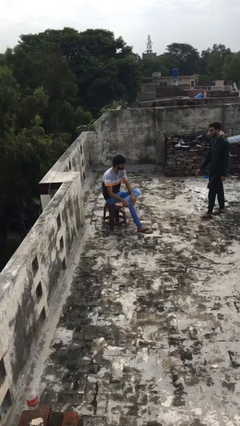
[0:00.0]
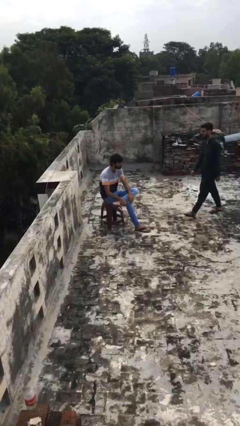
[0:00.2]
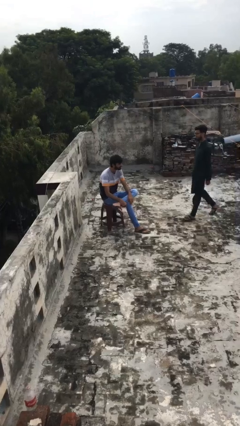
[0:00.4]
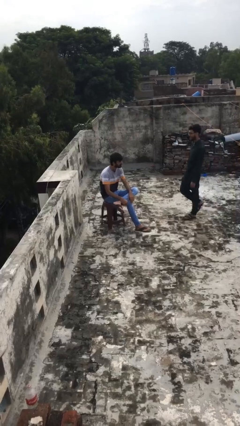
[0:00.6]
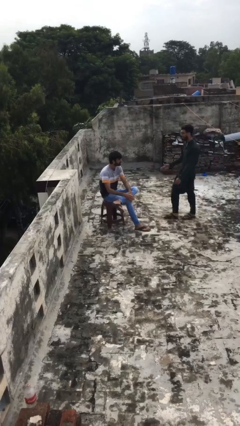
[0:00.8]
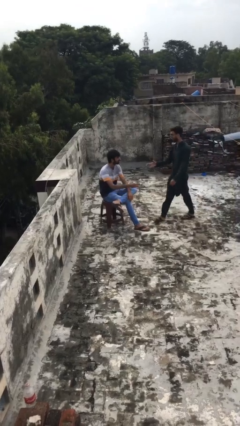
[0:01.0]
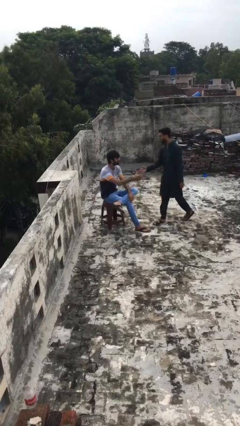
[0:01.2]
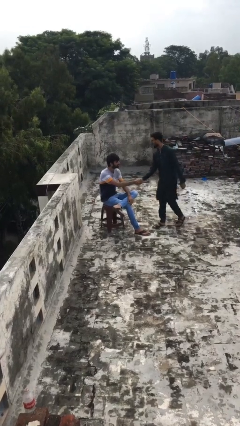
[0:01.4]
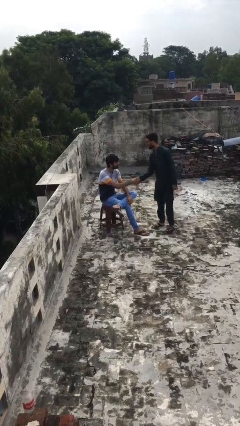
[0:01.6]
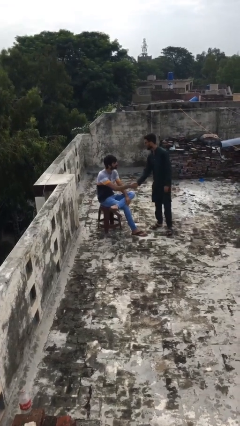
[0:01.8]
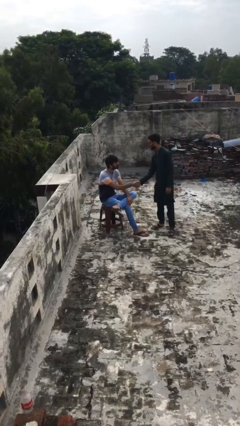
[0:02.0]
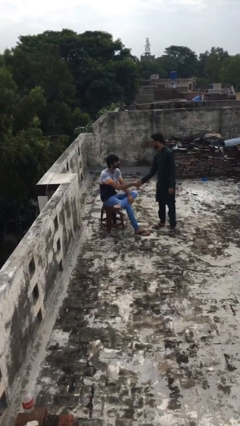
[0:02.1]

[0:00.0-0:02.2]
person shakes hand

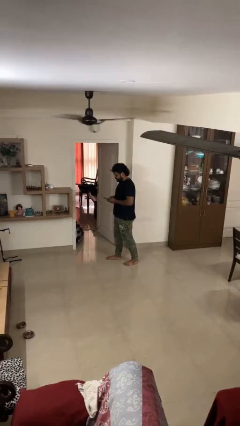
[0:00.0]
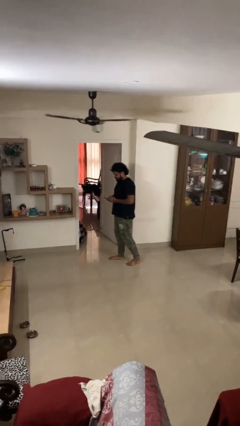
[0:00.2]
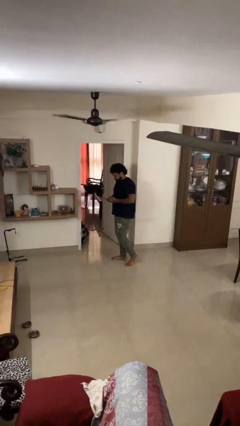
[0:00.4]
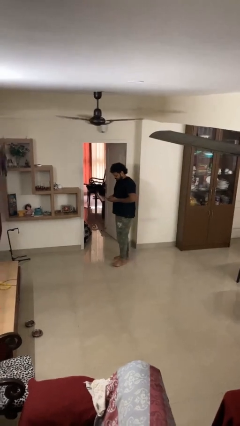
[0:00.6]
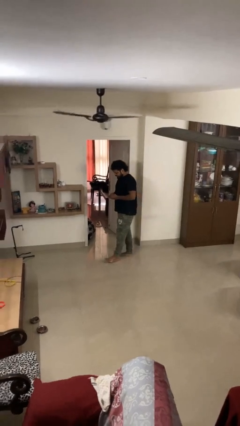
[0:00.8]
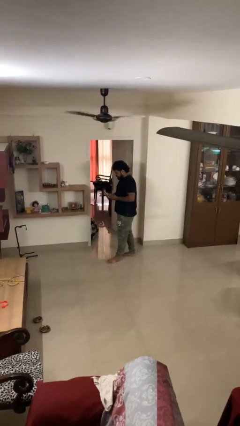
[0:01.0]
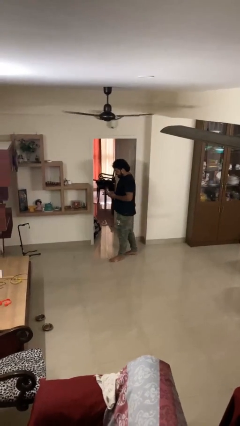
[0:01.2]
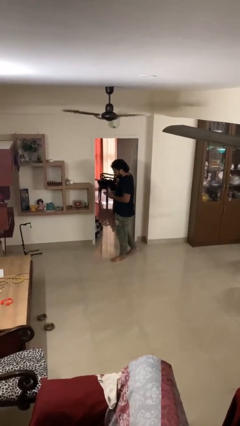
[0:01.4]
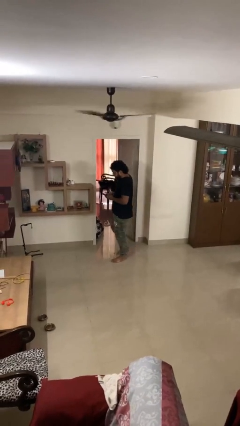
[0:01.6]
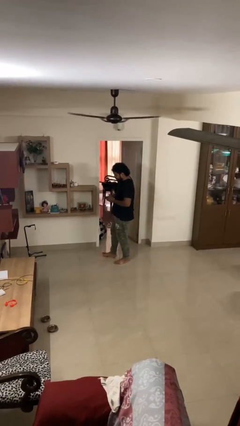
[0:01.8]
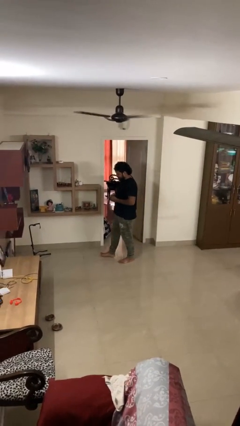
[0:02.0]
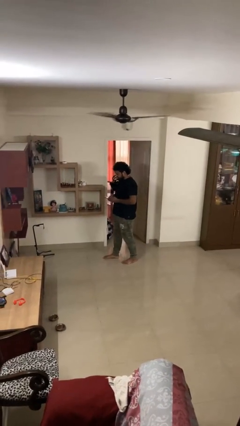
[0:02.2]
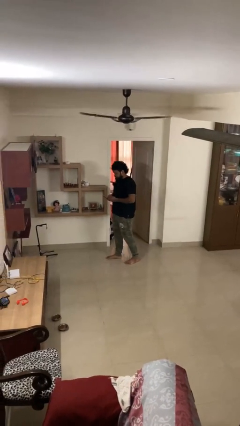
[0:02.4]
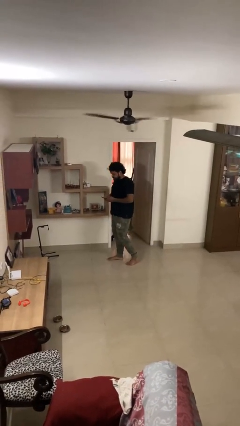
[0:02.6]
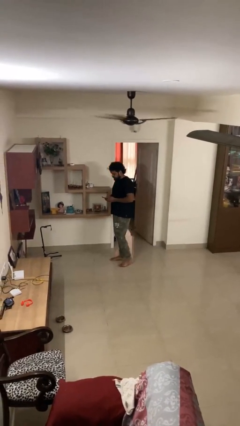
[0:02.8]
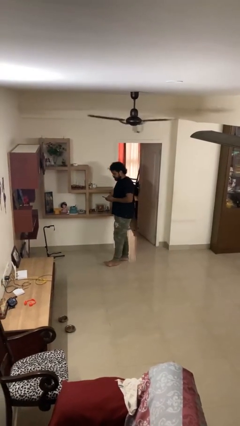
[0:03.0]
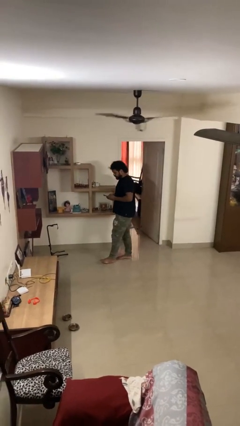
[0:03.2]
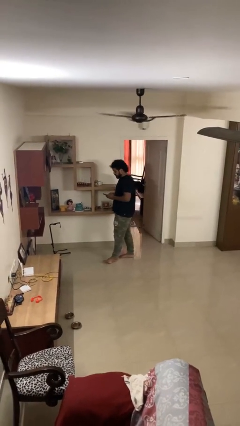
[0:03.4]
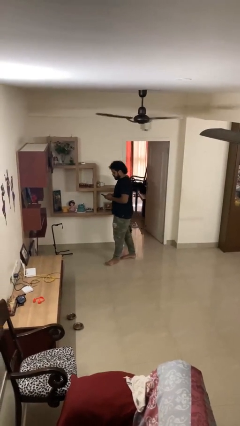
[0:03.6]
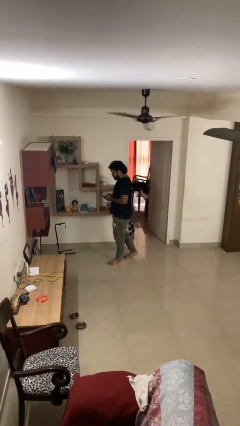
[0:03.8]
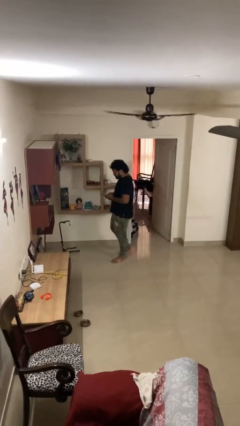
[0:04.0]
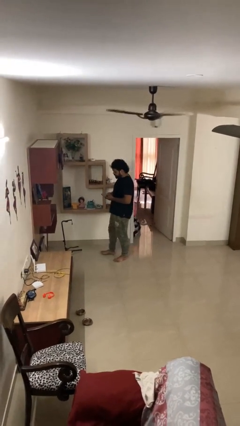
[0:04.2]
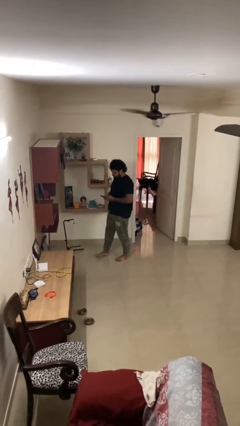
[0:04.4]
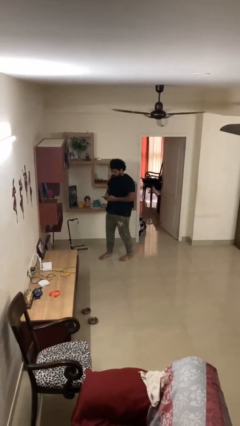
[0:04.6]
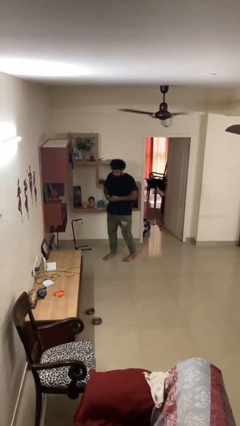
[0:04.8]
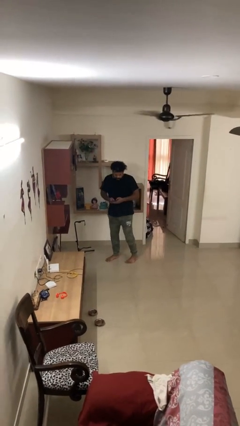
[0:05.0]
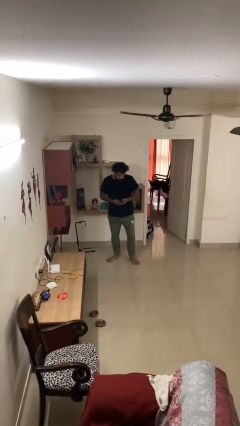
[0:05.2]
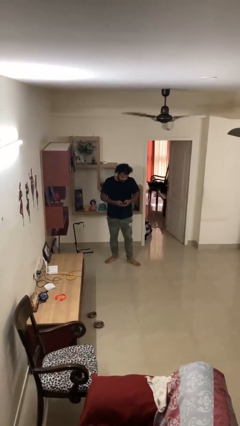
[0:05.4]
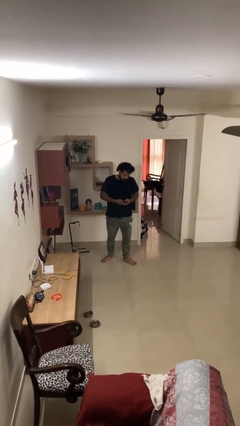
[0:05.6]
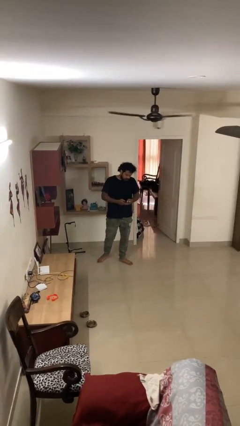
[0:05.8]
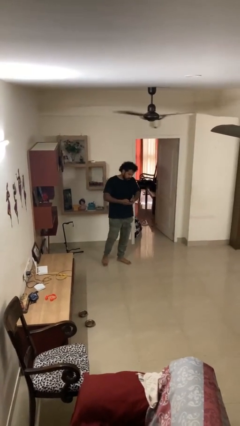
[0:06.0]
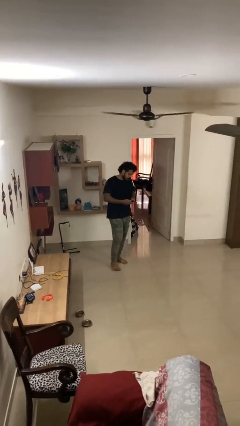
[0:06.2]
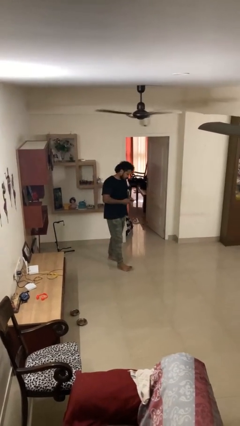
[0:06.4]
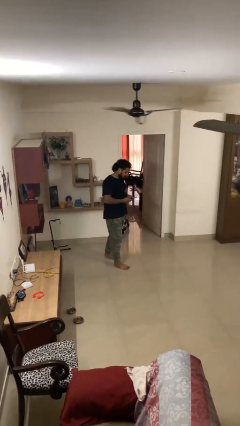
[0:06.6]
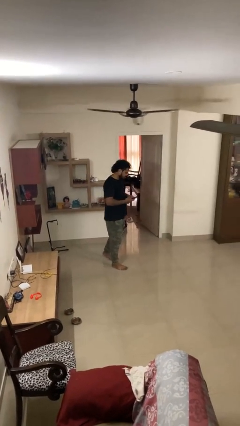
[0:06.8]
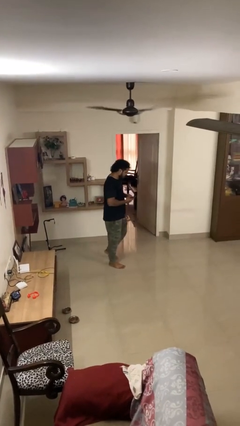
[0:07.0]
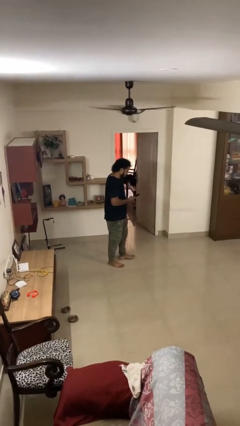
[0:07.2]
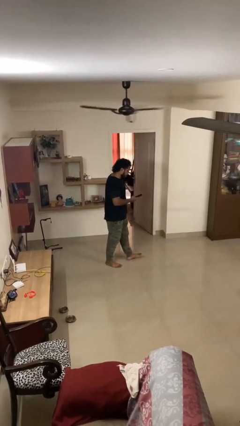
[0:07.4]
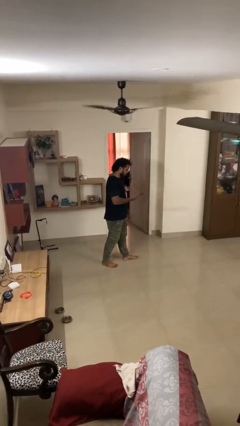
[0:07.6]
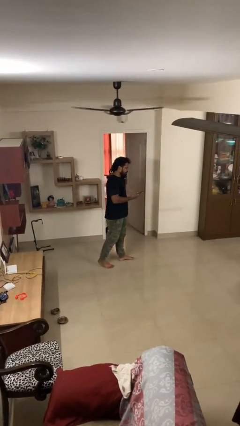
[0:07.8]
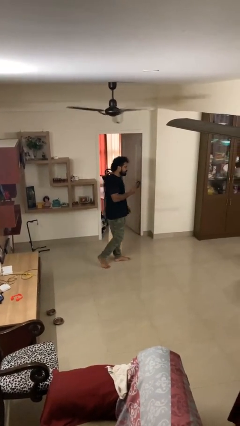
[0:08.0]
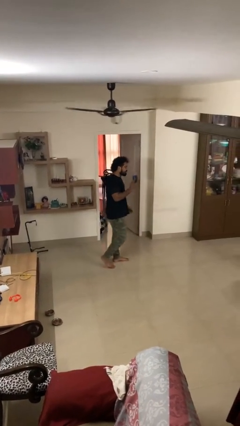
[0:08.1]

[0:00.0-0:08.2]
person texts on phone

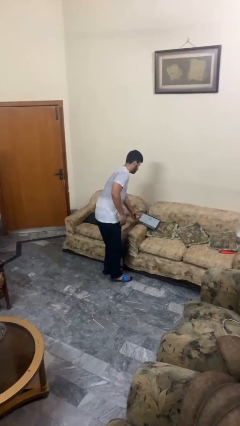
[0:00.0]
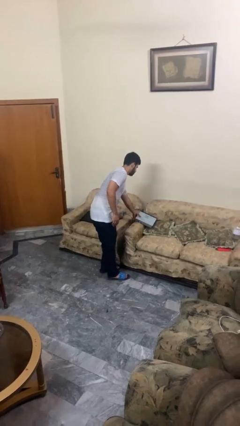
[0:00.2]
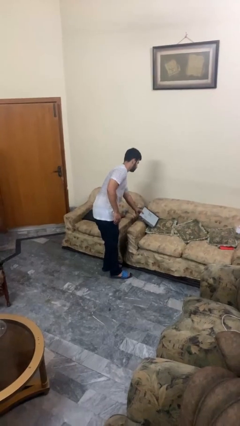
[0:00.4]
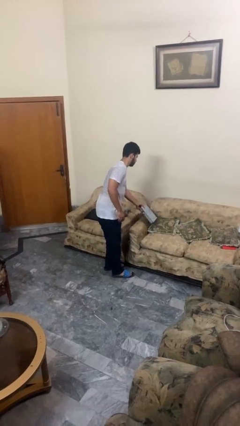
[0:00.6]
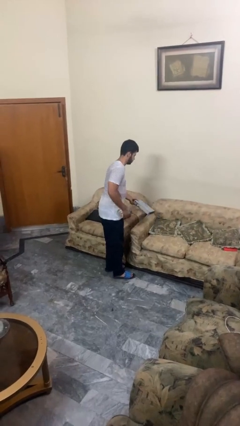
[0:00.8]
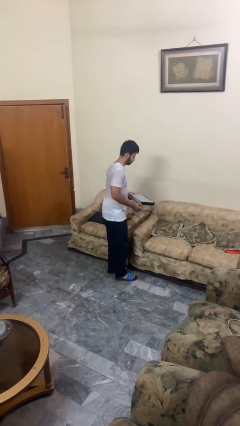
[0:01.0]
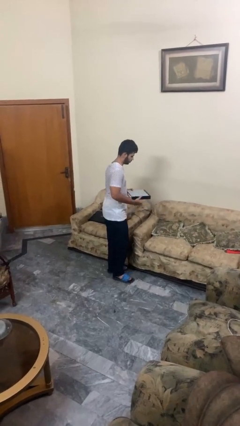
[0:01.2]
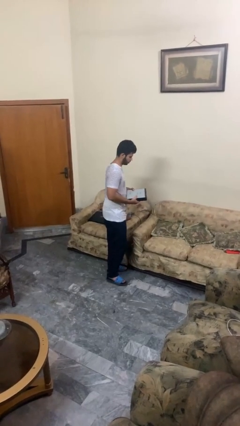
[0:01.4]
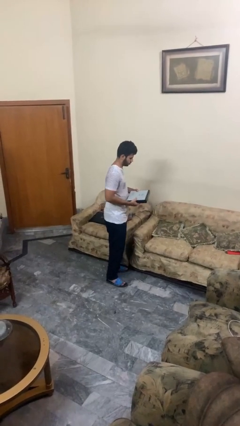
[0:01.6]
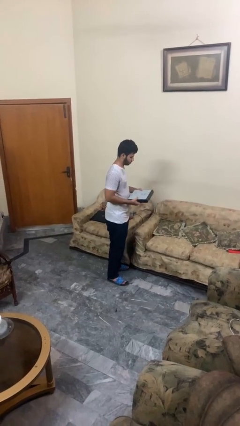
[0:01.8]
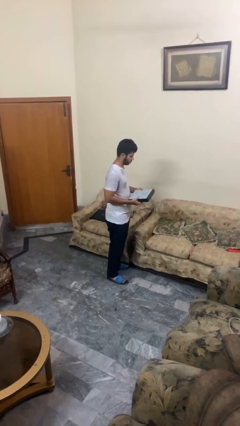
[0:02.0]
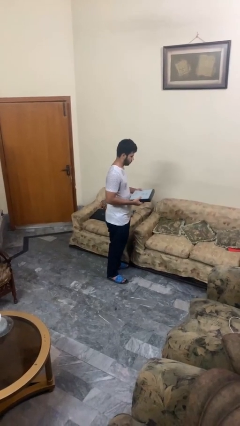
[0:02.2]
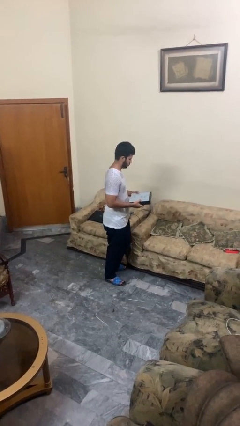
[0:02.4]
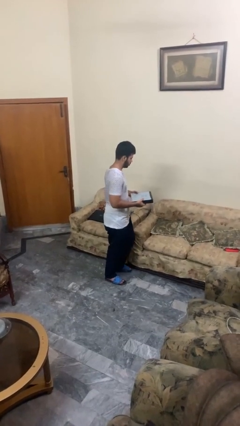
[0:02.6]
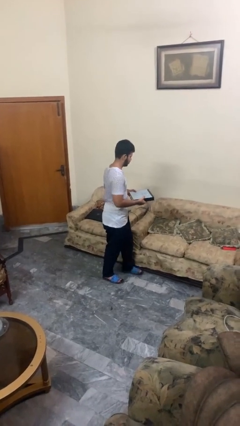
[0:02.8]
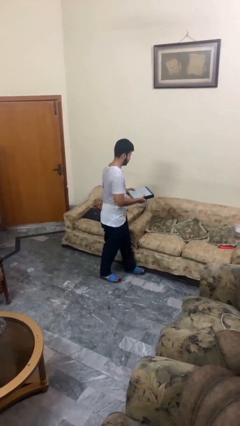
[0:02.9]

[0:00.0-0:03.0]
person picks up object from couch

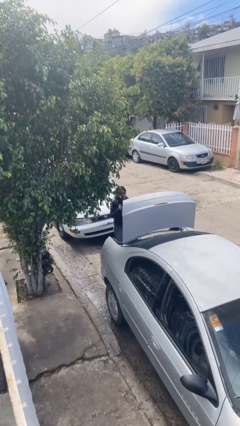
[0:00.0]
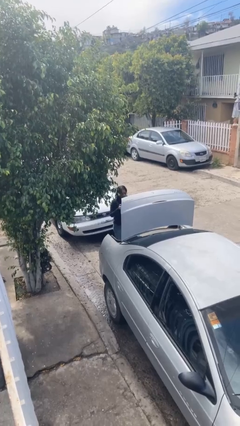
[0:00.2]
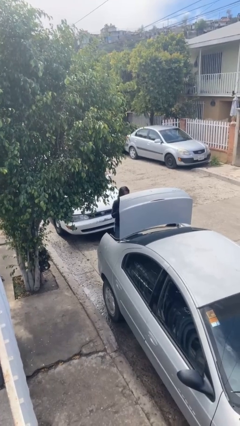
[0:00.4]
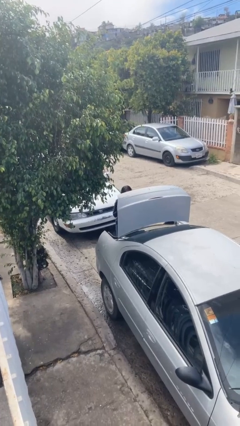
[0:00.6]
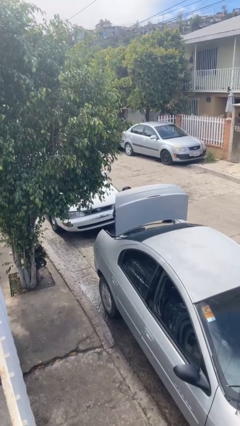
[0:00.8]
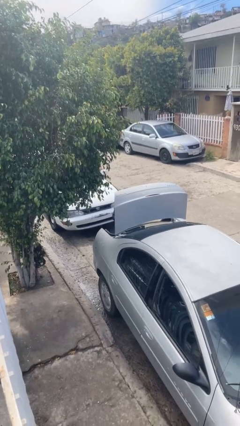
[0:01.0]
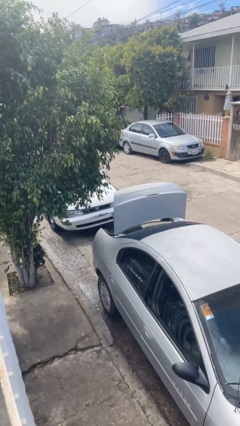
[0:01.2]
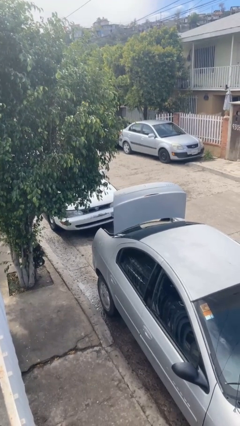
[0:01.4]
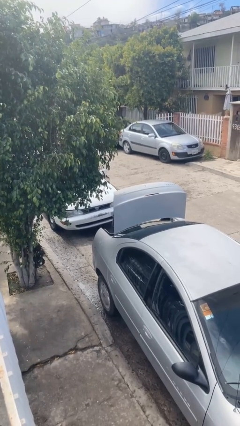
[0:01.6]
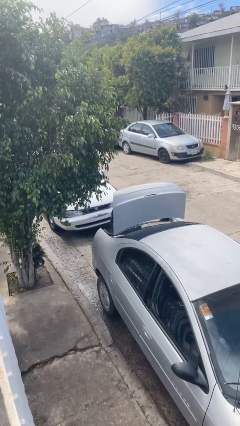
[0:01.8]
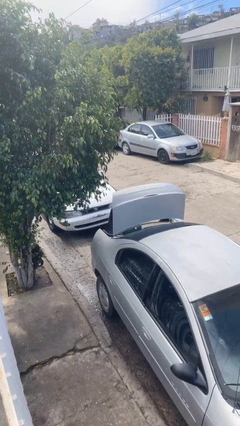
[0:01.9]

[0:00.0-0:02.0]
person loads car

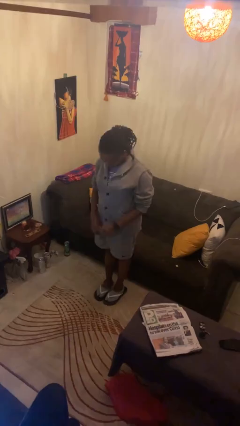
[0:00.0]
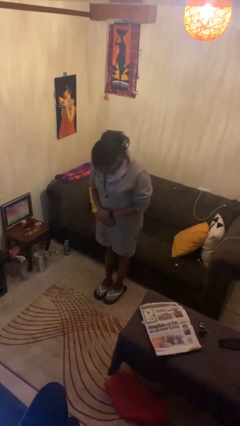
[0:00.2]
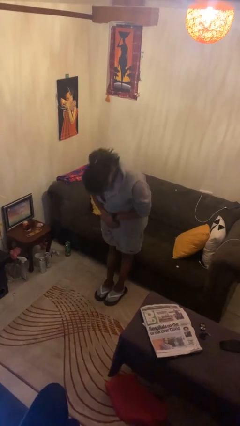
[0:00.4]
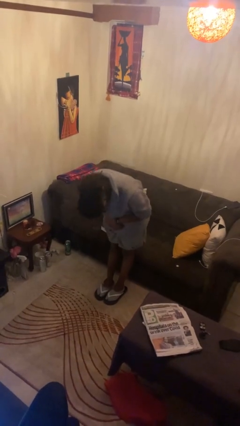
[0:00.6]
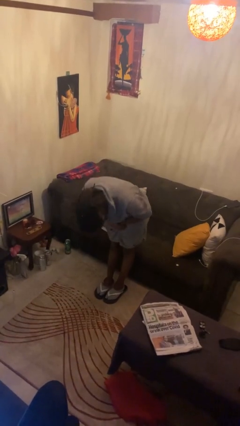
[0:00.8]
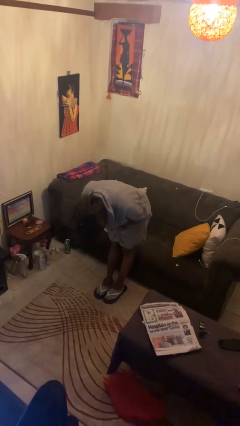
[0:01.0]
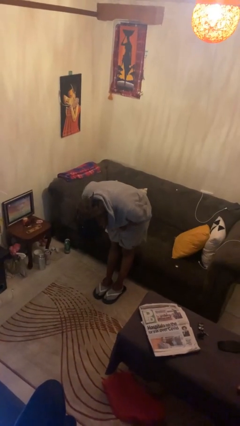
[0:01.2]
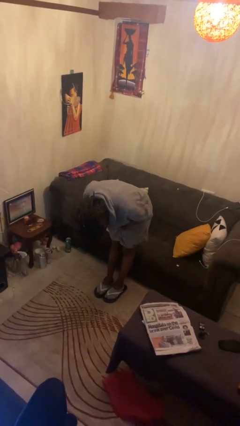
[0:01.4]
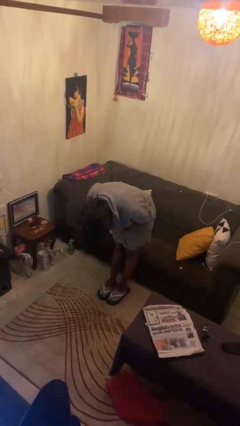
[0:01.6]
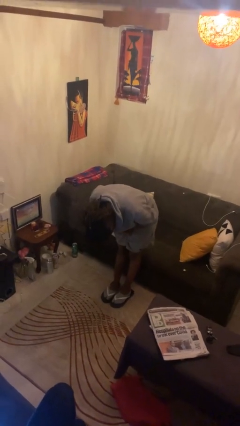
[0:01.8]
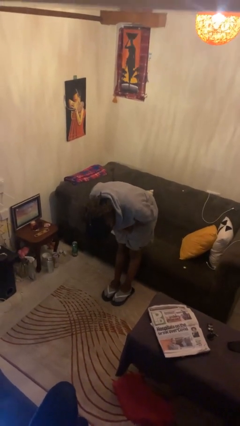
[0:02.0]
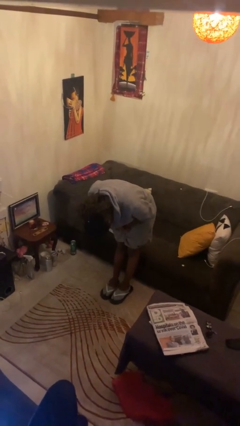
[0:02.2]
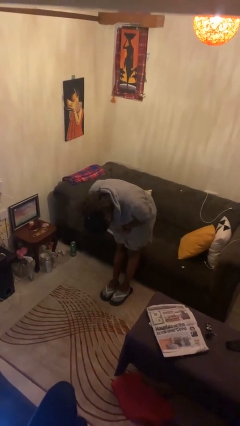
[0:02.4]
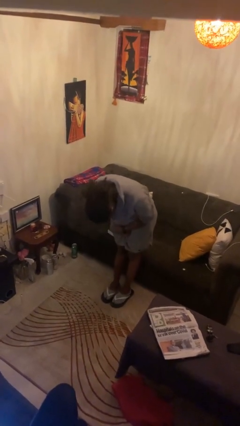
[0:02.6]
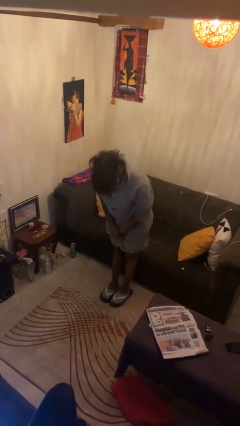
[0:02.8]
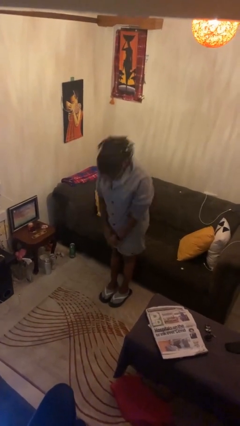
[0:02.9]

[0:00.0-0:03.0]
person bows
